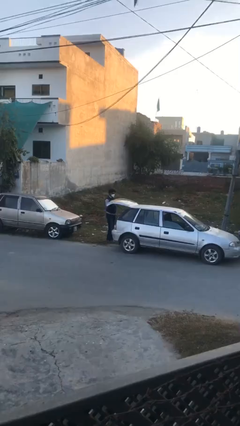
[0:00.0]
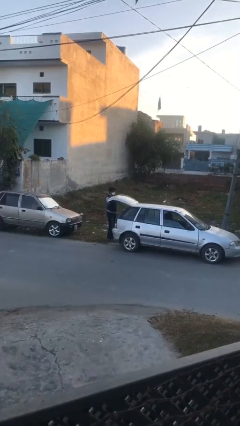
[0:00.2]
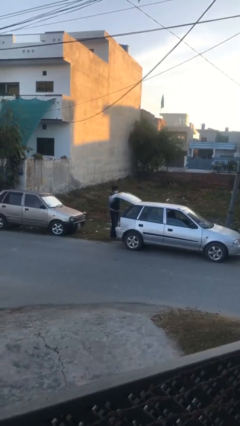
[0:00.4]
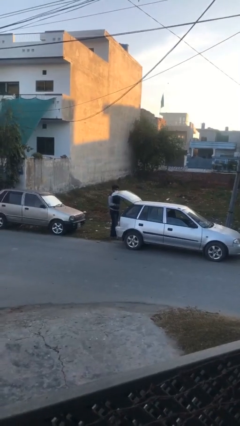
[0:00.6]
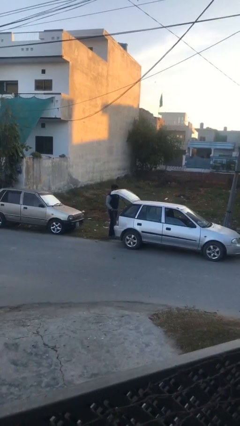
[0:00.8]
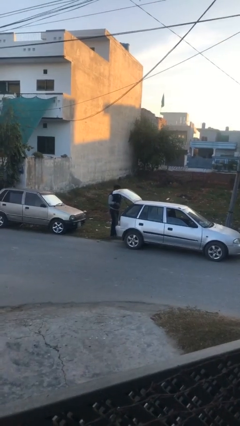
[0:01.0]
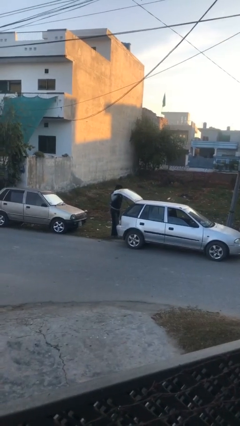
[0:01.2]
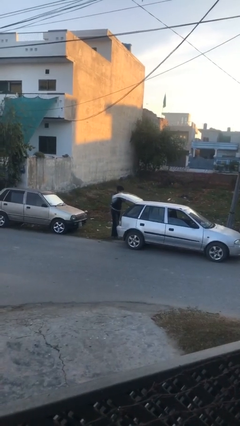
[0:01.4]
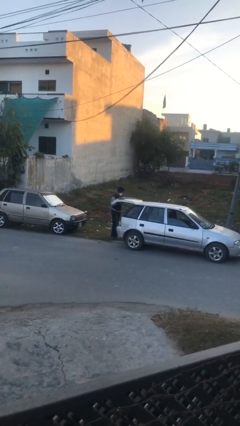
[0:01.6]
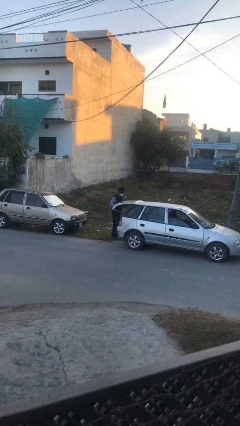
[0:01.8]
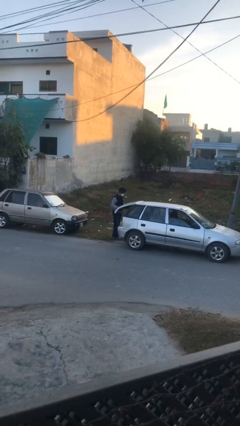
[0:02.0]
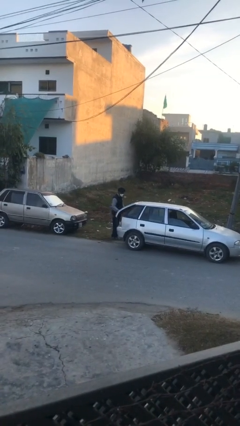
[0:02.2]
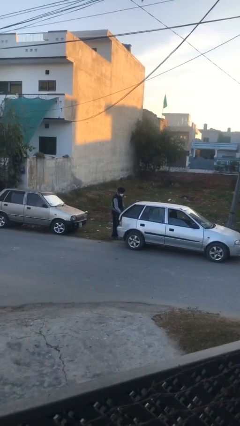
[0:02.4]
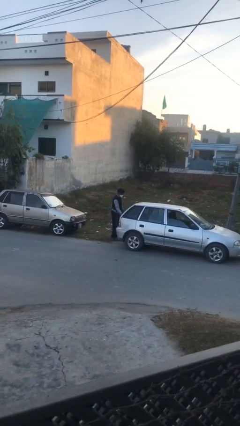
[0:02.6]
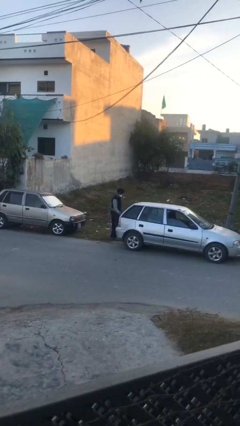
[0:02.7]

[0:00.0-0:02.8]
person closes car trunk

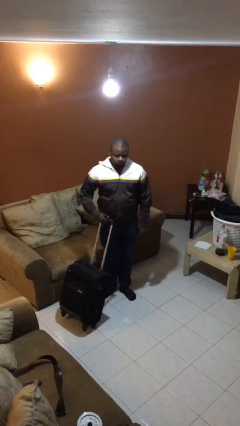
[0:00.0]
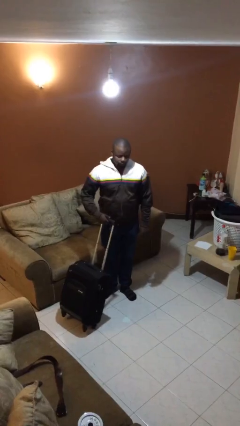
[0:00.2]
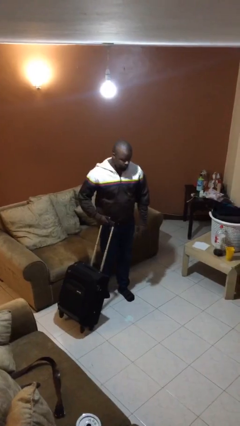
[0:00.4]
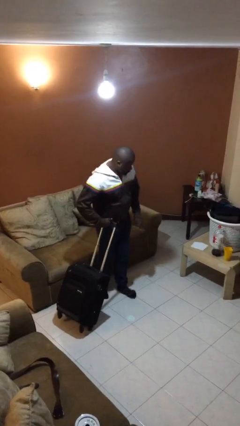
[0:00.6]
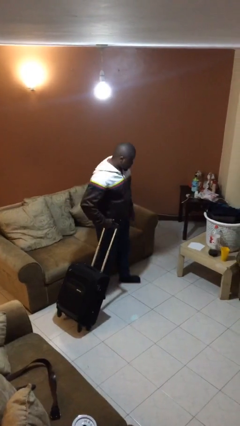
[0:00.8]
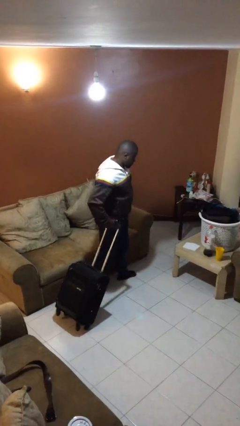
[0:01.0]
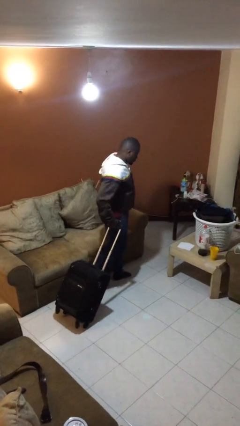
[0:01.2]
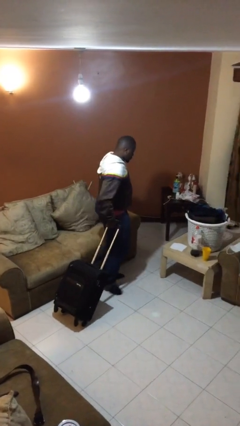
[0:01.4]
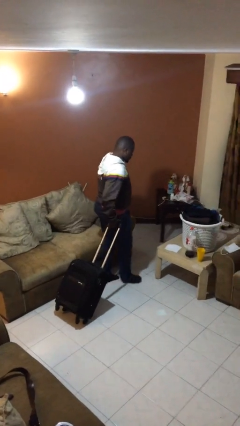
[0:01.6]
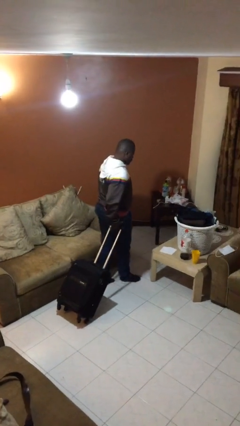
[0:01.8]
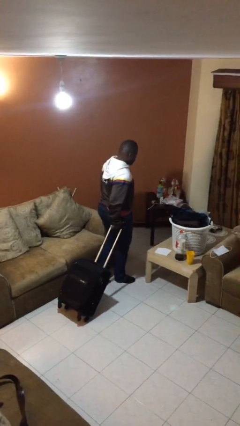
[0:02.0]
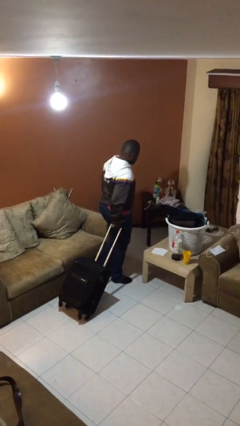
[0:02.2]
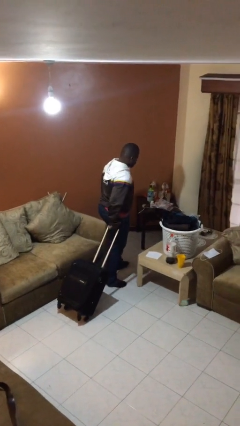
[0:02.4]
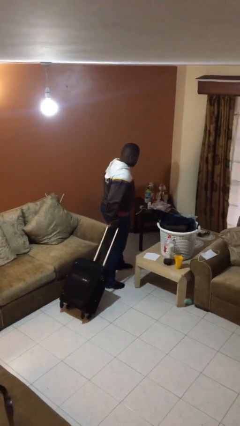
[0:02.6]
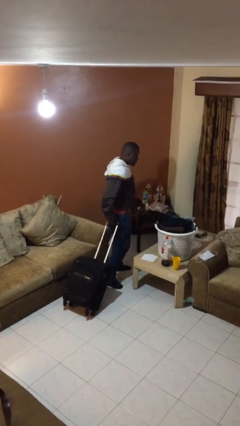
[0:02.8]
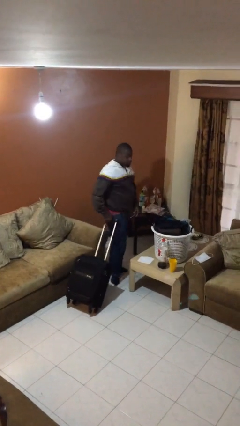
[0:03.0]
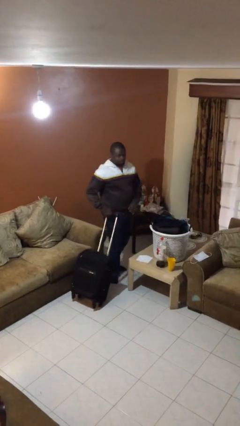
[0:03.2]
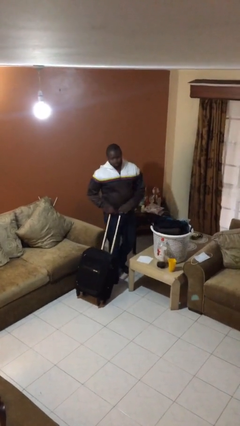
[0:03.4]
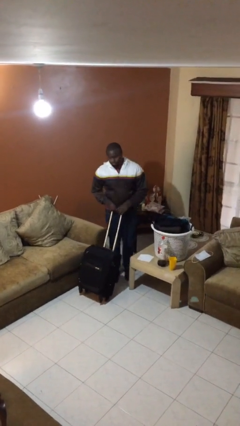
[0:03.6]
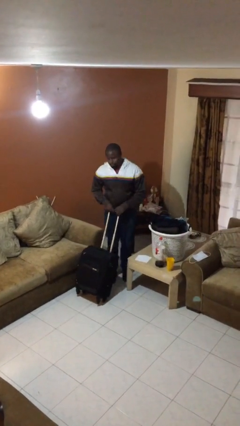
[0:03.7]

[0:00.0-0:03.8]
person pulls wheeled cart

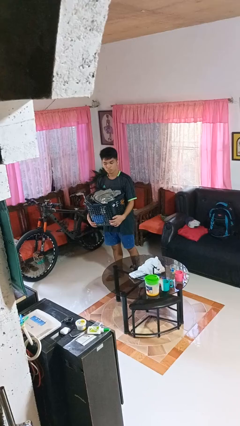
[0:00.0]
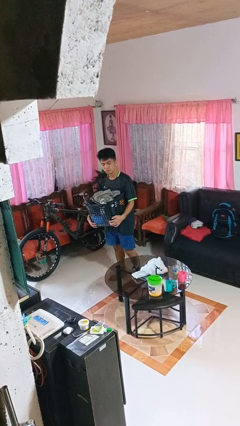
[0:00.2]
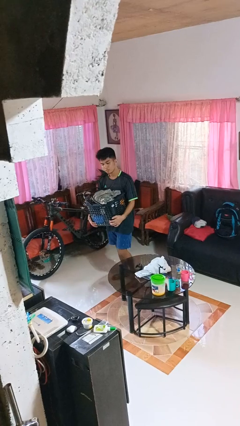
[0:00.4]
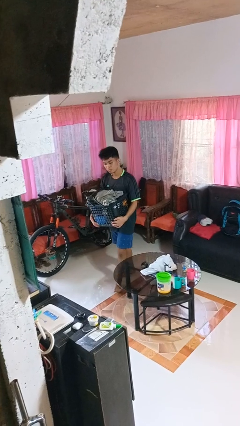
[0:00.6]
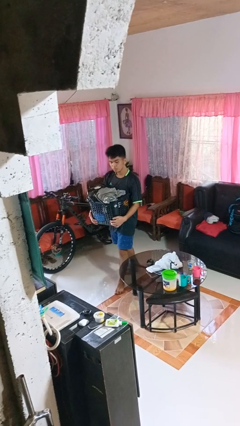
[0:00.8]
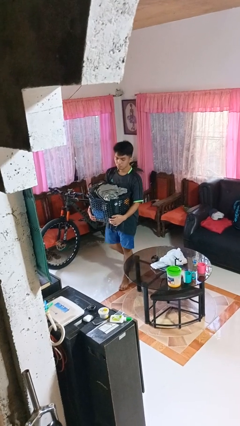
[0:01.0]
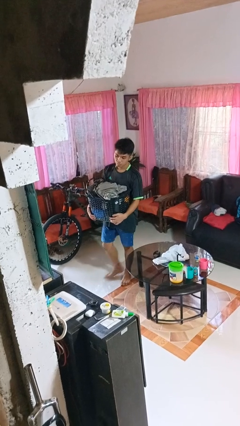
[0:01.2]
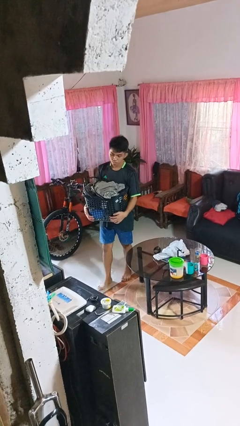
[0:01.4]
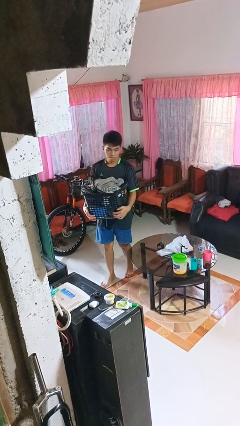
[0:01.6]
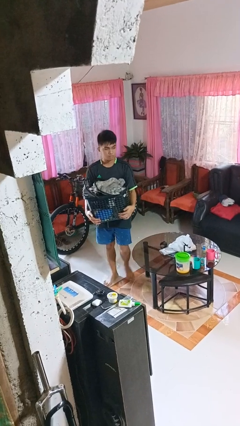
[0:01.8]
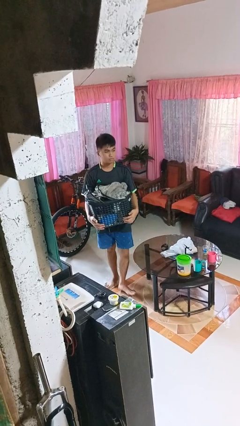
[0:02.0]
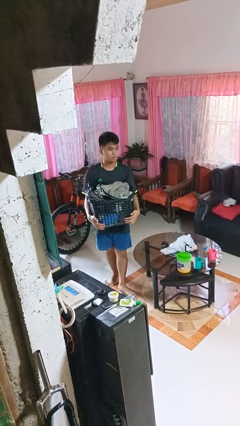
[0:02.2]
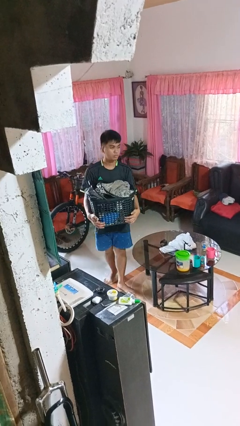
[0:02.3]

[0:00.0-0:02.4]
person carries laundry basket

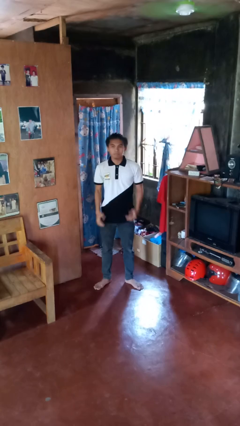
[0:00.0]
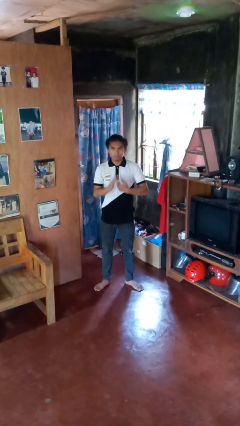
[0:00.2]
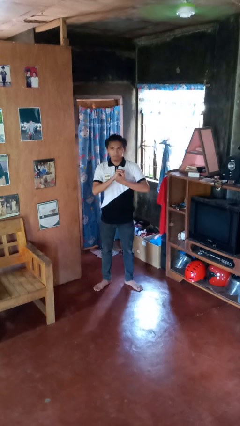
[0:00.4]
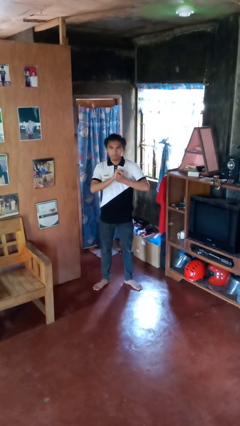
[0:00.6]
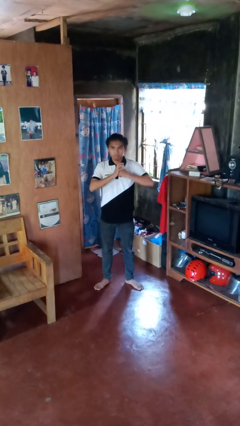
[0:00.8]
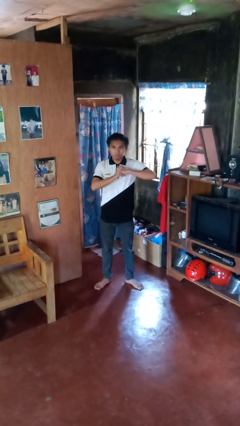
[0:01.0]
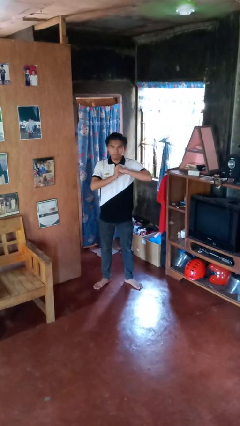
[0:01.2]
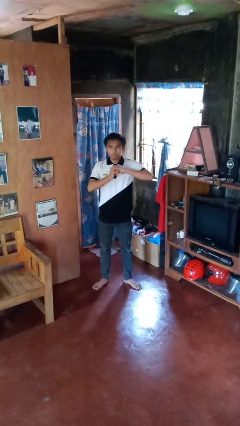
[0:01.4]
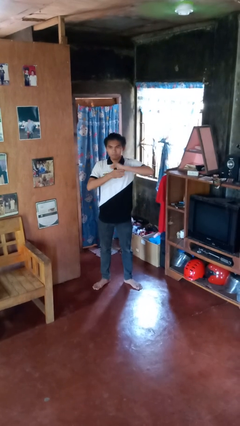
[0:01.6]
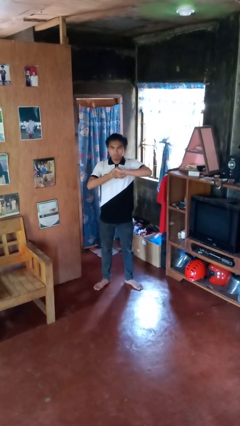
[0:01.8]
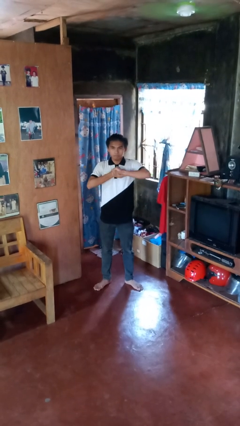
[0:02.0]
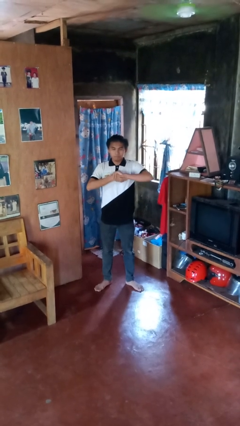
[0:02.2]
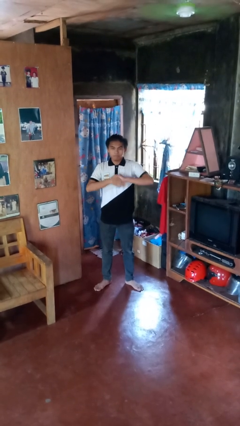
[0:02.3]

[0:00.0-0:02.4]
person cracks knuckles

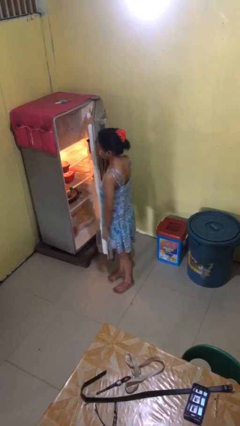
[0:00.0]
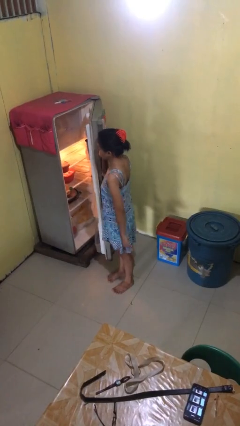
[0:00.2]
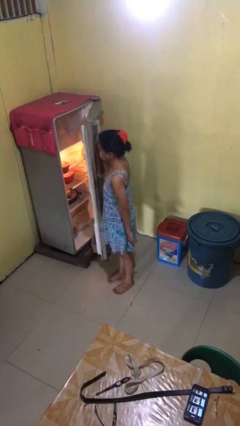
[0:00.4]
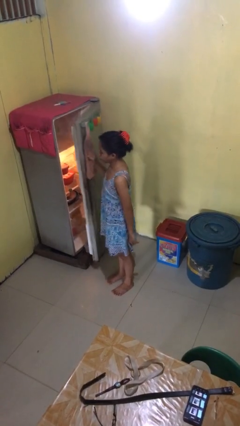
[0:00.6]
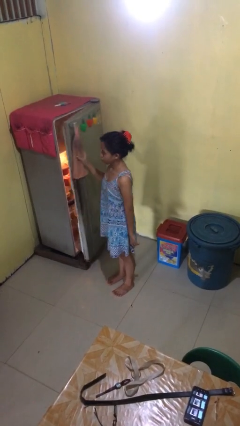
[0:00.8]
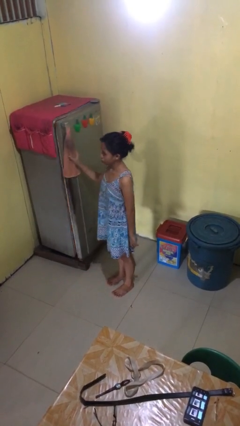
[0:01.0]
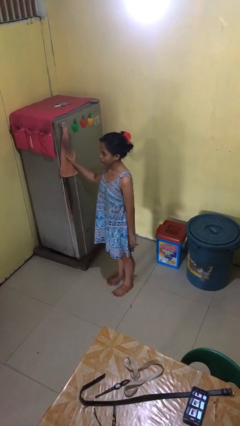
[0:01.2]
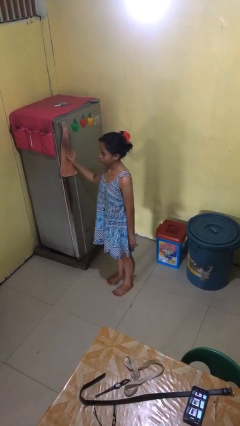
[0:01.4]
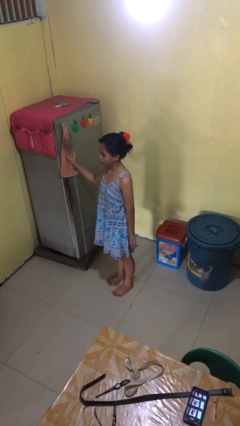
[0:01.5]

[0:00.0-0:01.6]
person closes refrigerator

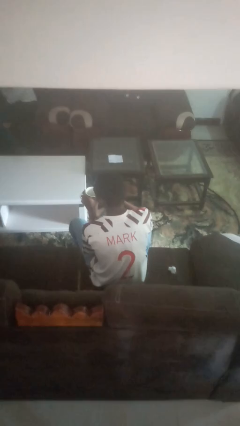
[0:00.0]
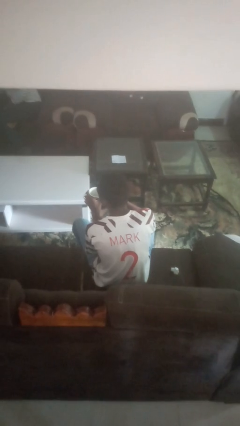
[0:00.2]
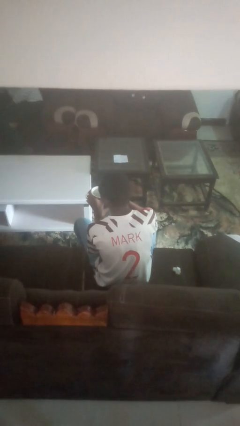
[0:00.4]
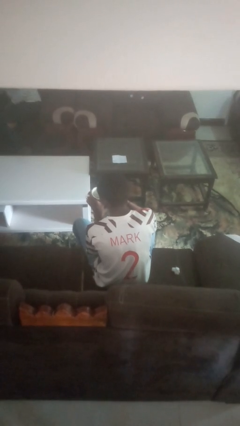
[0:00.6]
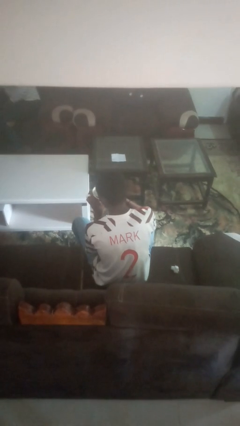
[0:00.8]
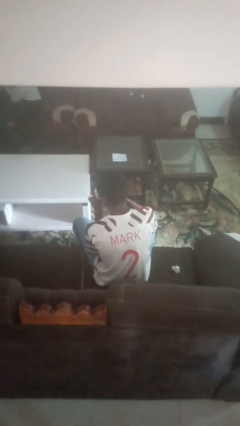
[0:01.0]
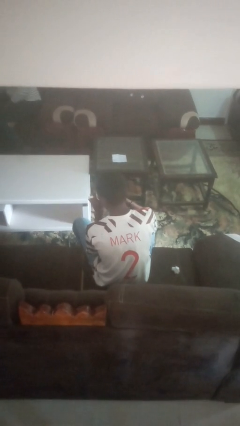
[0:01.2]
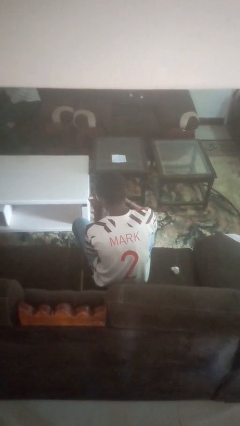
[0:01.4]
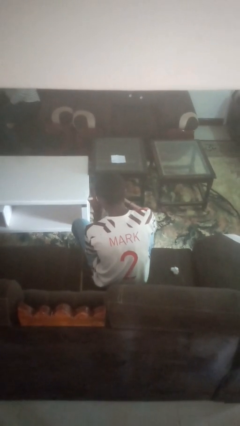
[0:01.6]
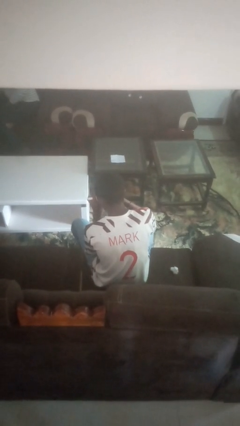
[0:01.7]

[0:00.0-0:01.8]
person drinks from mug

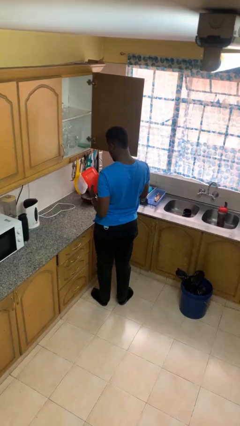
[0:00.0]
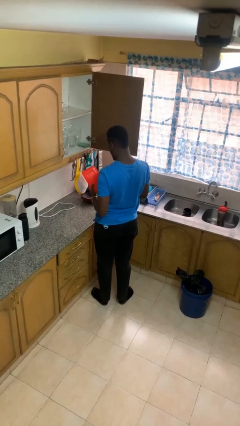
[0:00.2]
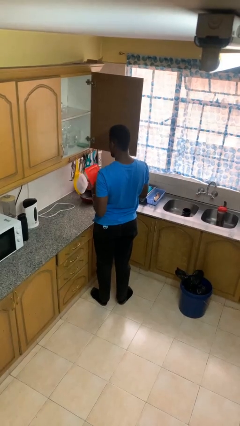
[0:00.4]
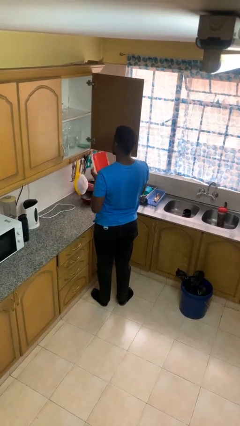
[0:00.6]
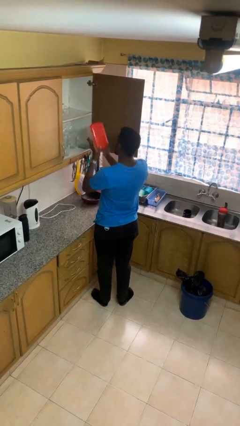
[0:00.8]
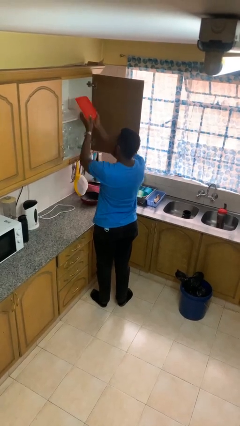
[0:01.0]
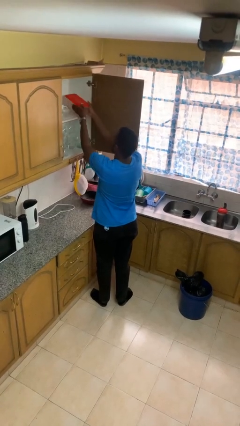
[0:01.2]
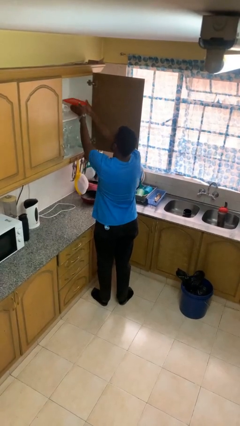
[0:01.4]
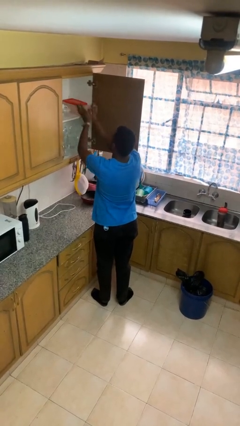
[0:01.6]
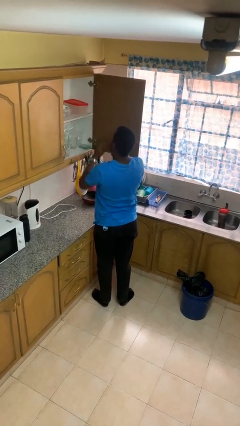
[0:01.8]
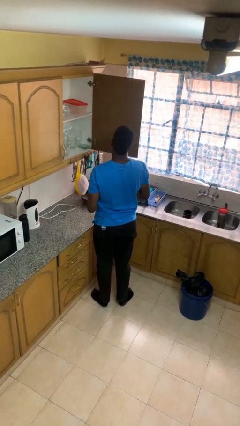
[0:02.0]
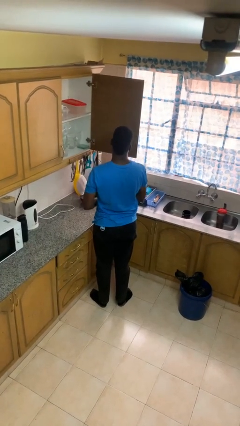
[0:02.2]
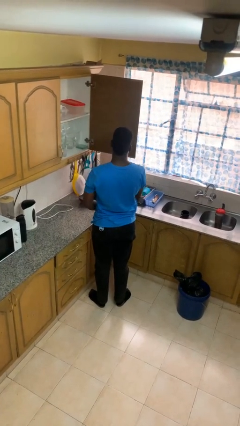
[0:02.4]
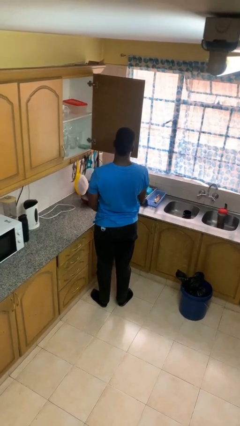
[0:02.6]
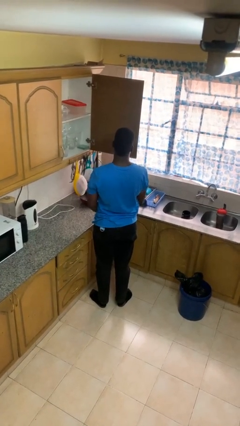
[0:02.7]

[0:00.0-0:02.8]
person puts down object into cabinet
